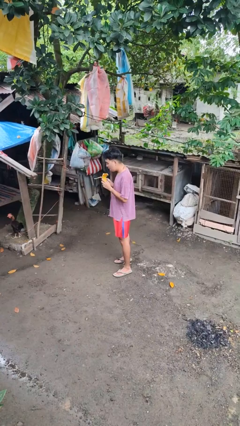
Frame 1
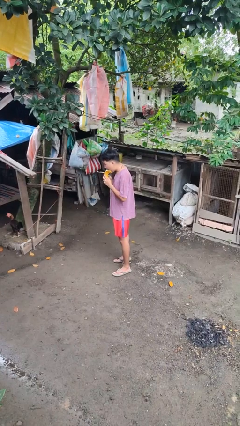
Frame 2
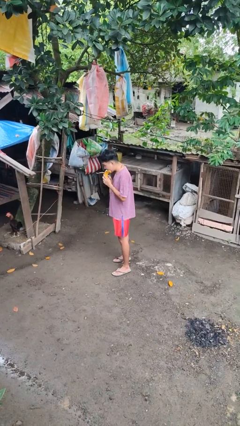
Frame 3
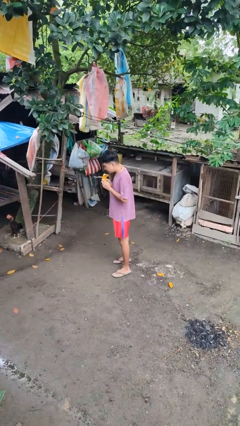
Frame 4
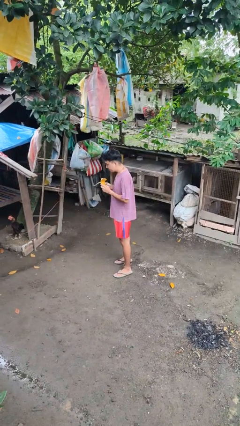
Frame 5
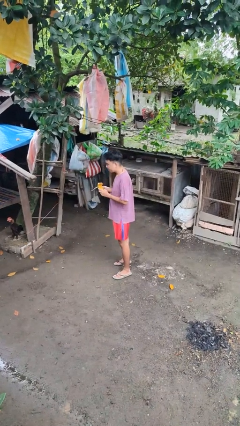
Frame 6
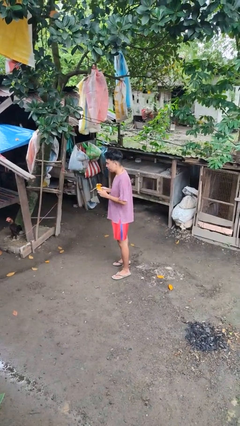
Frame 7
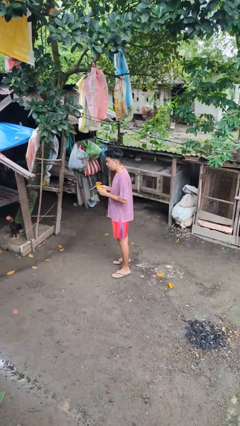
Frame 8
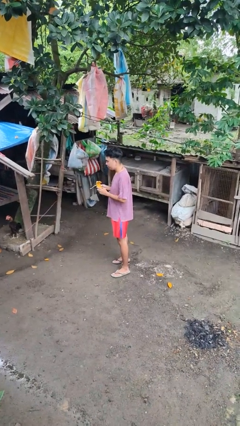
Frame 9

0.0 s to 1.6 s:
person eats banana

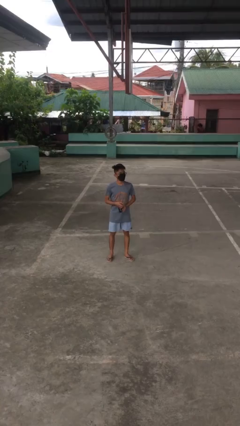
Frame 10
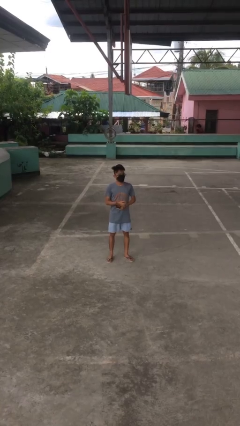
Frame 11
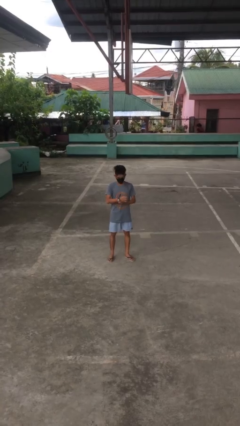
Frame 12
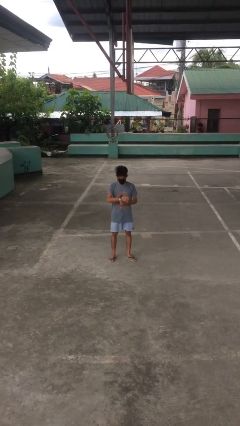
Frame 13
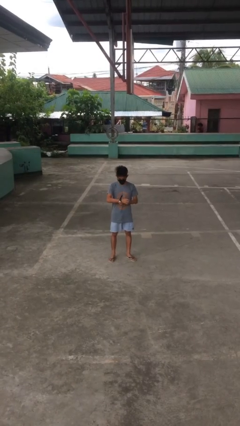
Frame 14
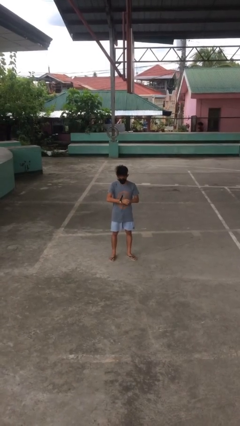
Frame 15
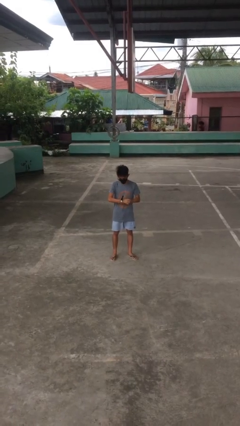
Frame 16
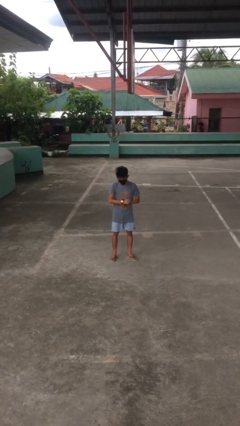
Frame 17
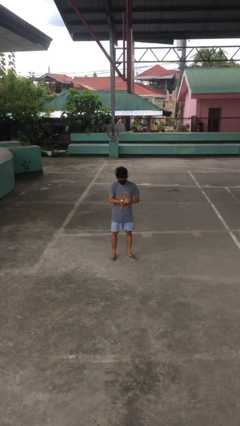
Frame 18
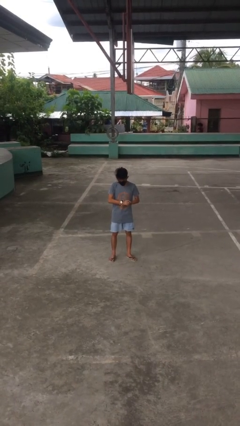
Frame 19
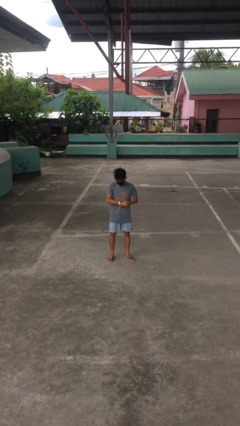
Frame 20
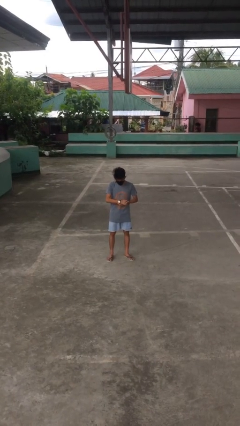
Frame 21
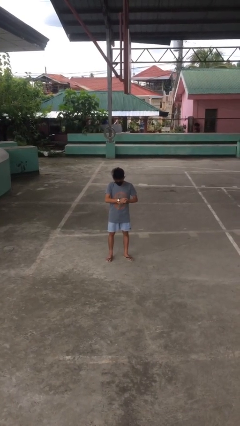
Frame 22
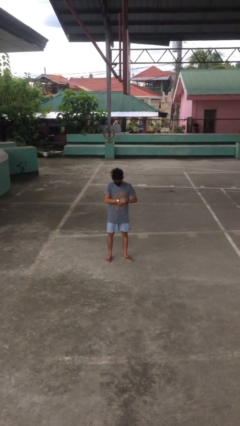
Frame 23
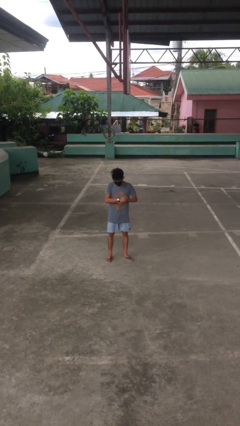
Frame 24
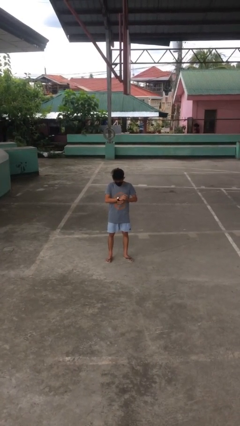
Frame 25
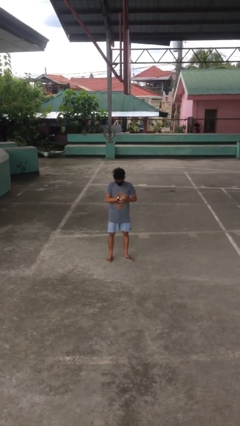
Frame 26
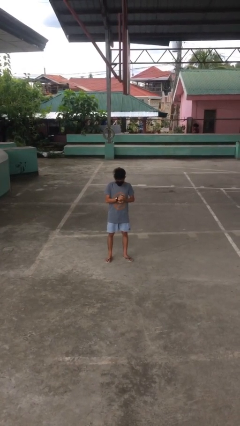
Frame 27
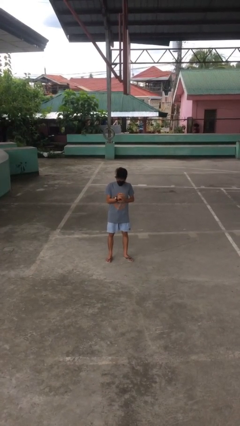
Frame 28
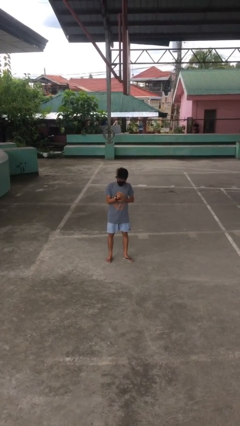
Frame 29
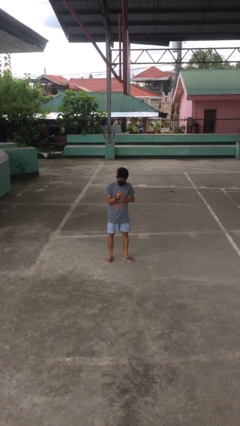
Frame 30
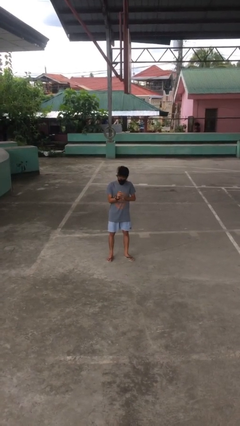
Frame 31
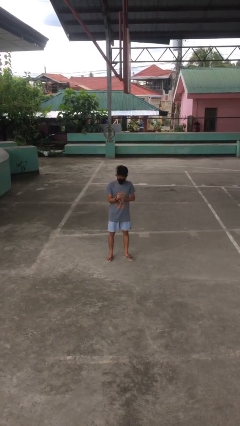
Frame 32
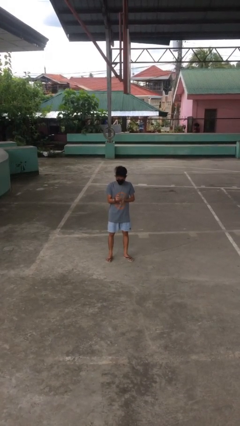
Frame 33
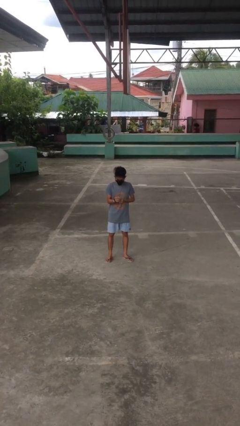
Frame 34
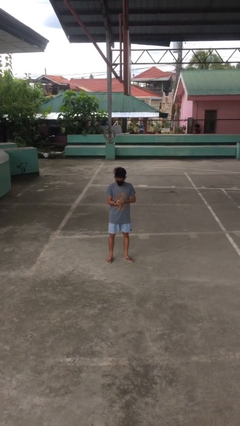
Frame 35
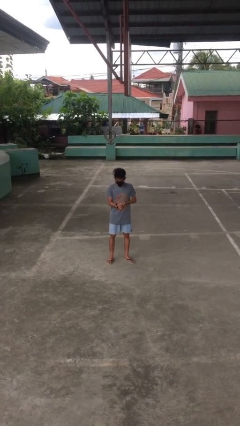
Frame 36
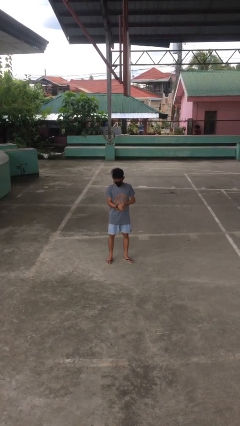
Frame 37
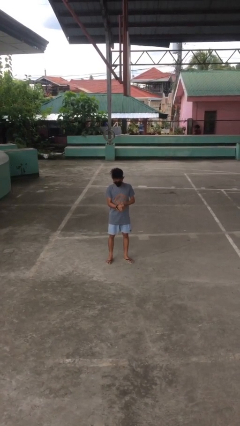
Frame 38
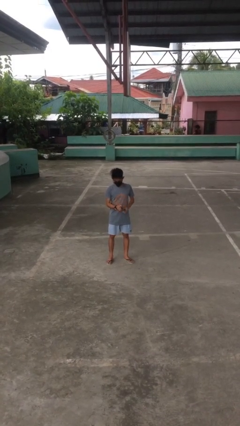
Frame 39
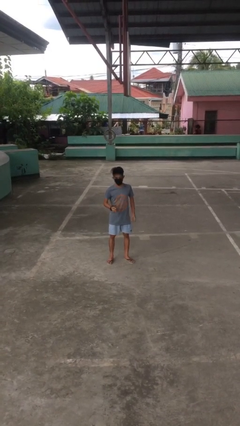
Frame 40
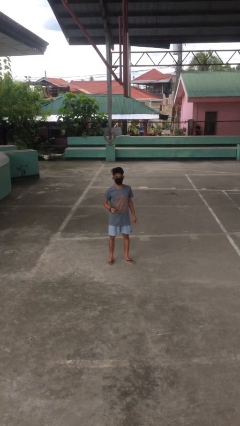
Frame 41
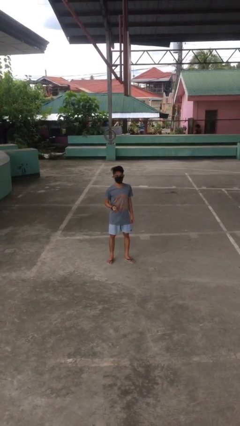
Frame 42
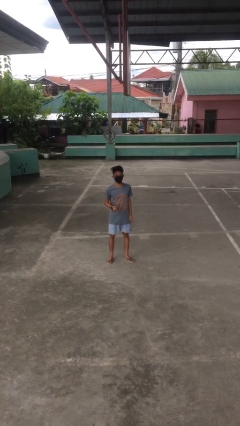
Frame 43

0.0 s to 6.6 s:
person puts on wristwatch

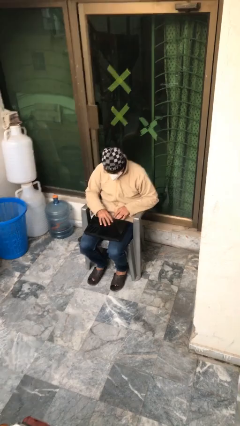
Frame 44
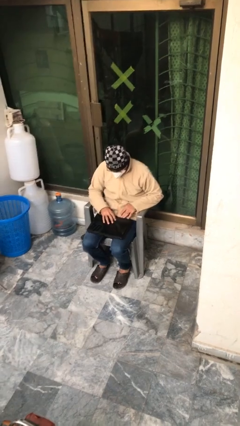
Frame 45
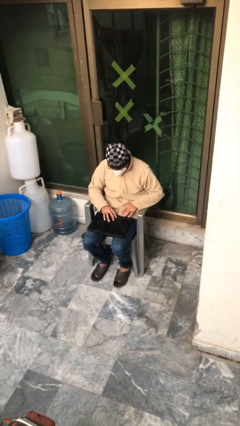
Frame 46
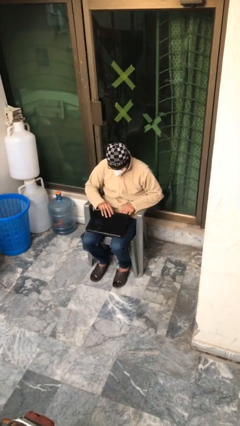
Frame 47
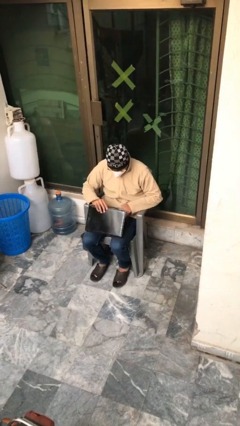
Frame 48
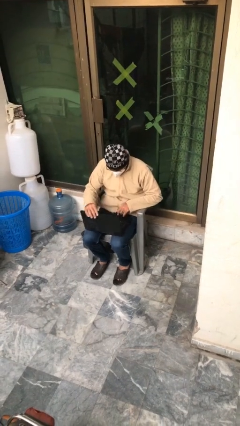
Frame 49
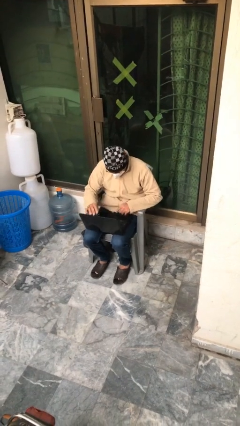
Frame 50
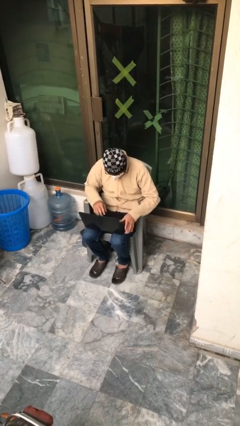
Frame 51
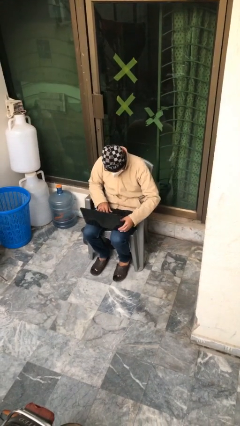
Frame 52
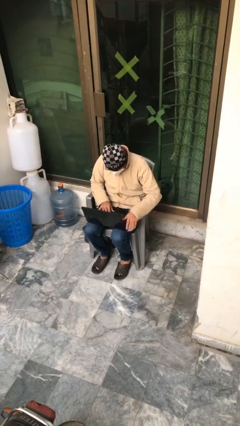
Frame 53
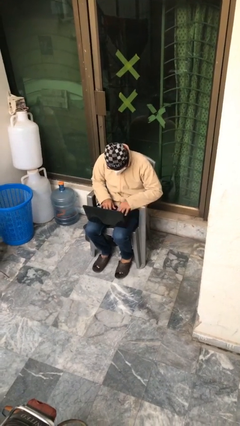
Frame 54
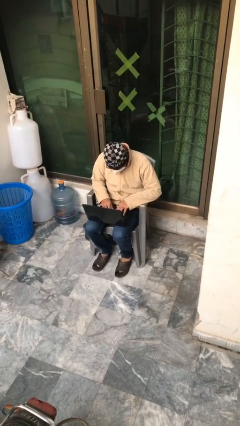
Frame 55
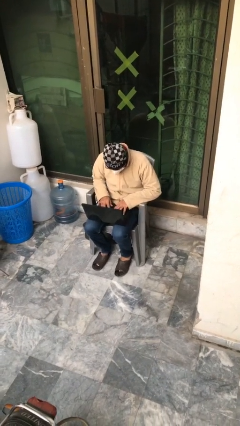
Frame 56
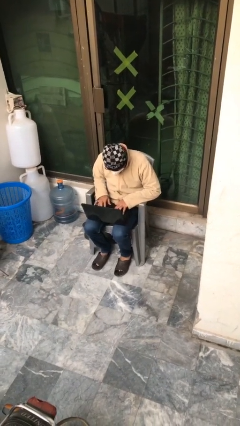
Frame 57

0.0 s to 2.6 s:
person interacts with laptop

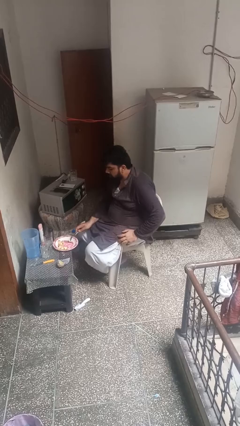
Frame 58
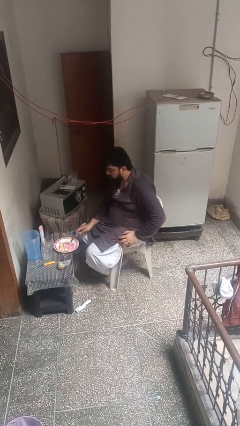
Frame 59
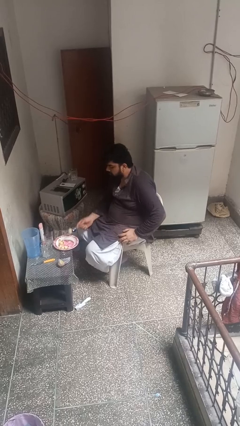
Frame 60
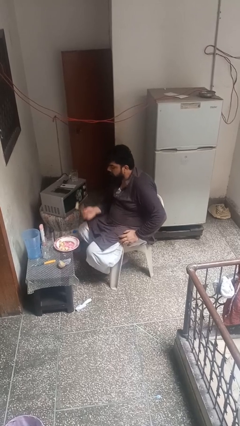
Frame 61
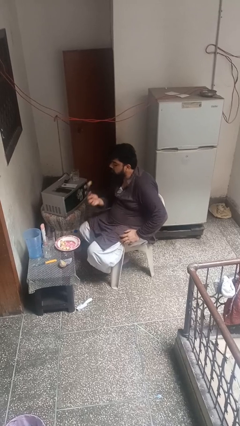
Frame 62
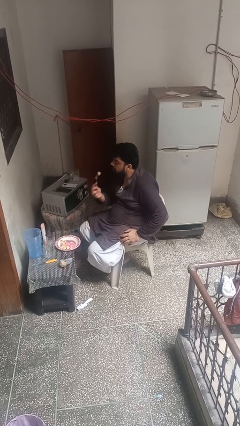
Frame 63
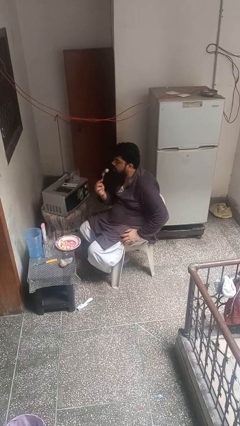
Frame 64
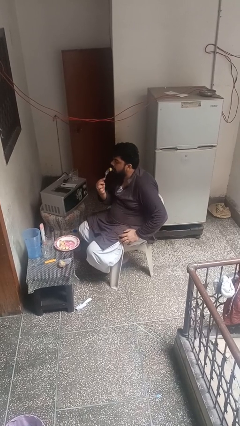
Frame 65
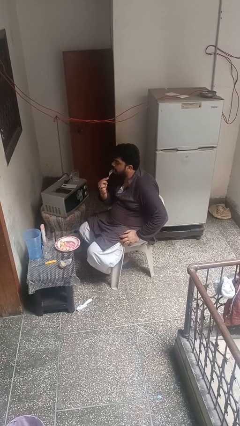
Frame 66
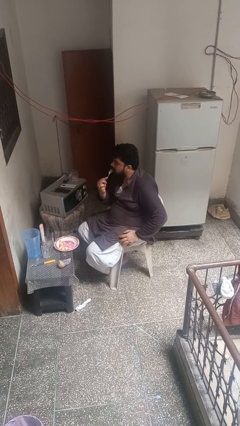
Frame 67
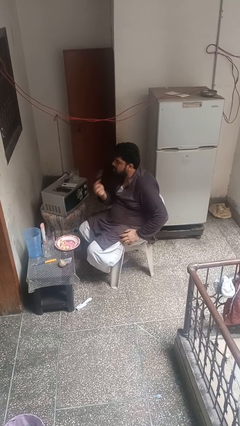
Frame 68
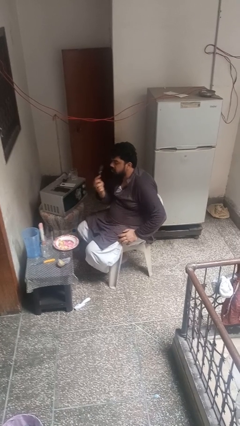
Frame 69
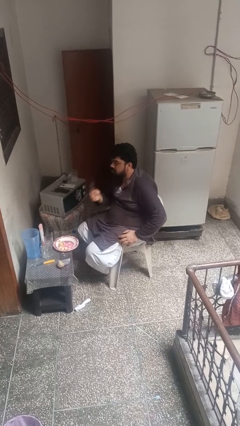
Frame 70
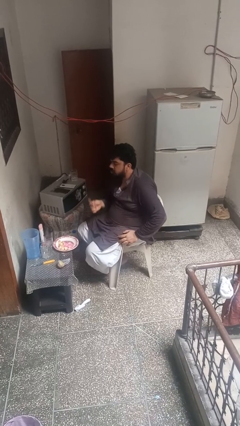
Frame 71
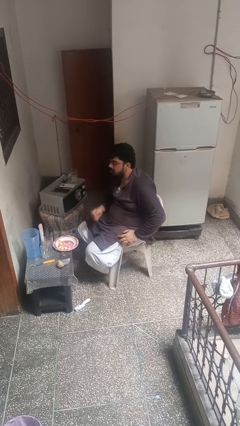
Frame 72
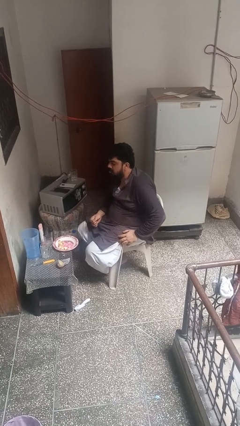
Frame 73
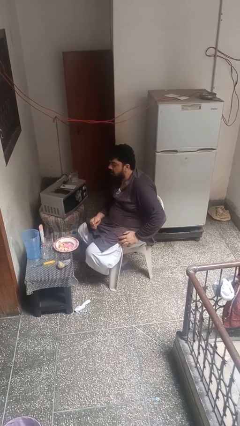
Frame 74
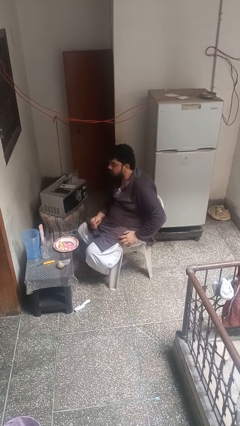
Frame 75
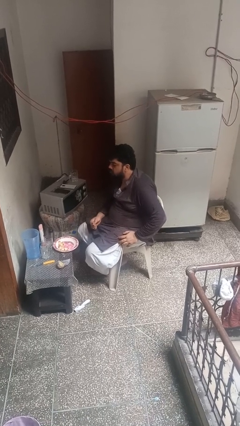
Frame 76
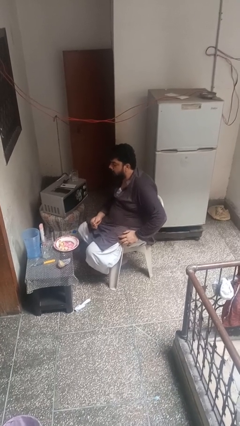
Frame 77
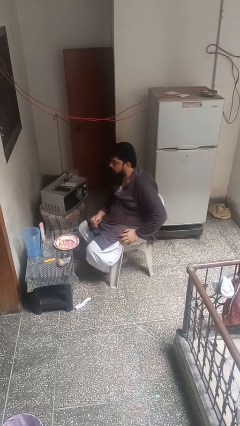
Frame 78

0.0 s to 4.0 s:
person eats with utensil

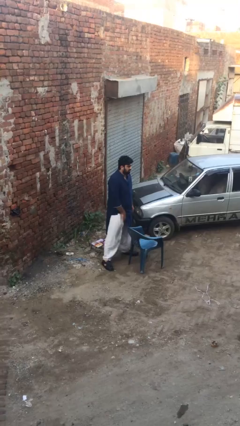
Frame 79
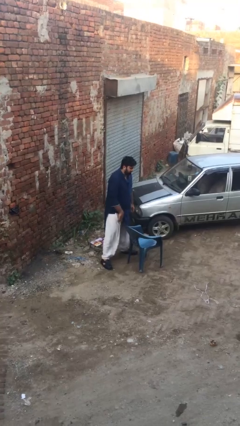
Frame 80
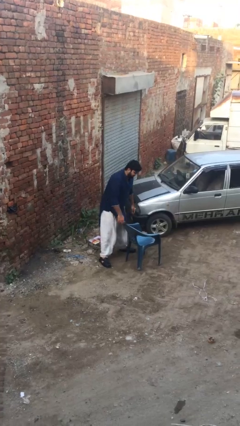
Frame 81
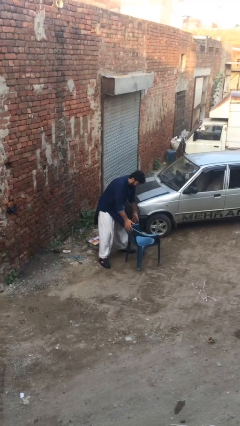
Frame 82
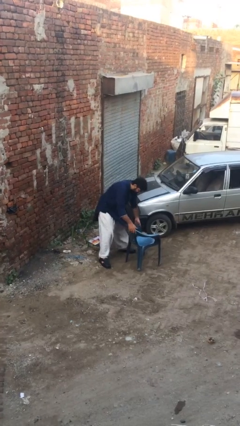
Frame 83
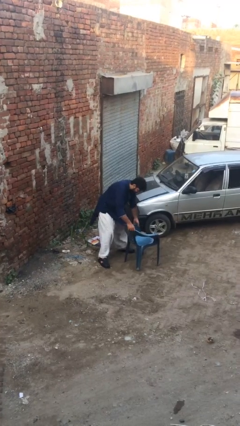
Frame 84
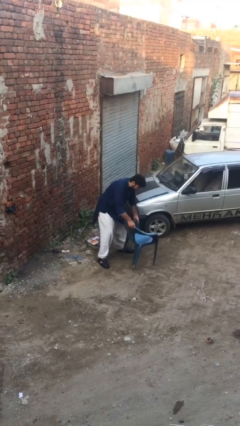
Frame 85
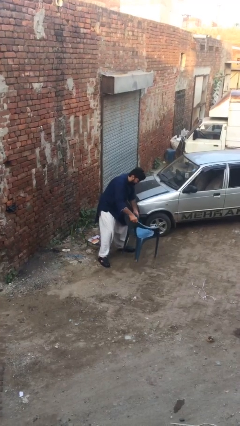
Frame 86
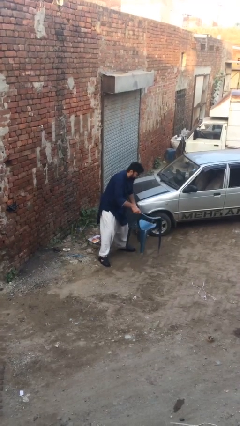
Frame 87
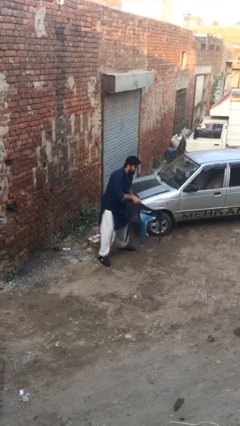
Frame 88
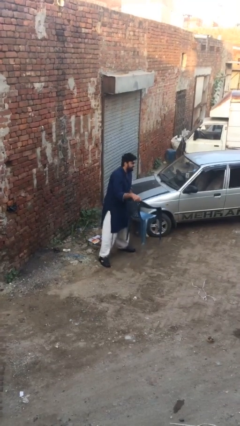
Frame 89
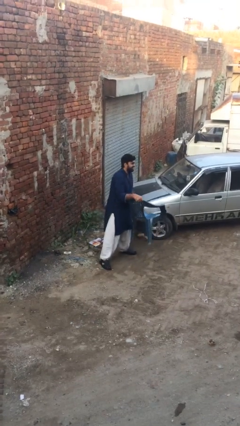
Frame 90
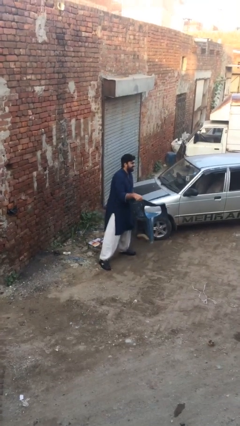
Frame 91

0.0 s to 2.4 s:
person picks up object from floor
